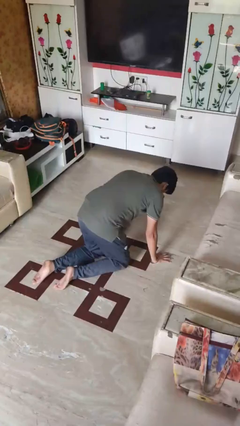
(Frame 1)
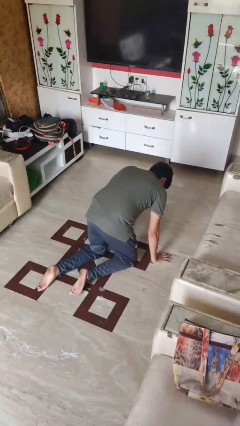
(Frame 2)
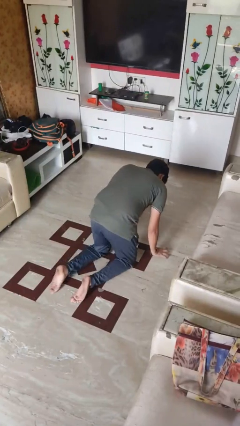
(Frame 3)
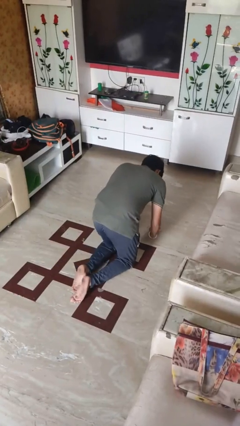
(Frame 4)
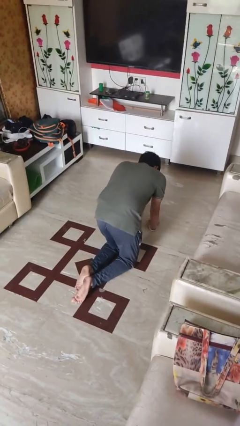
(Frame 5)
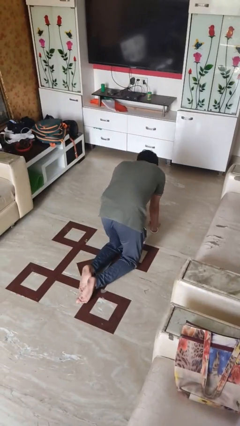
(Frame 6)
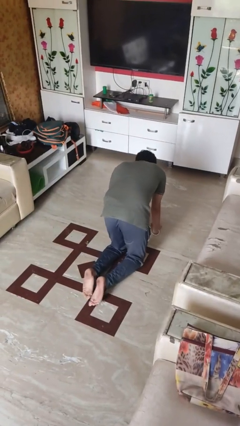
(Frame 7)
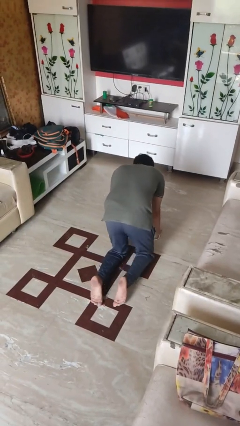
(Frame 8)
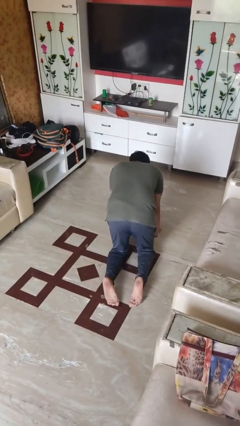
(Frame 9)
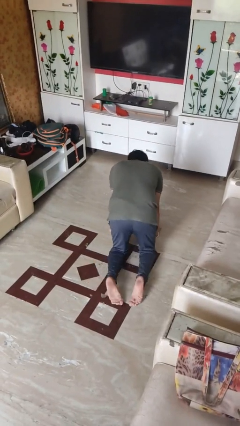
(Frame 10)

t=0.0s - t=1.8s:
person crawls

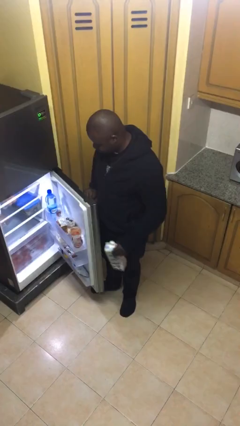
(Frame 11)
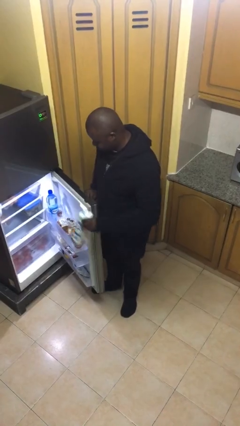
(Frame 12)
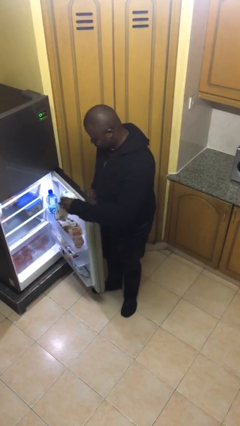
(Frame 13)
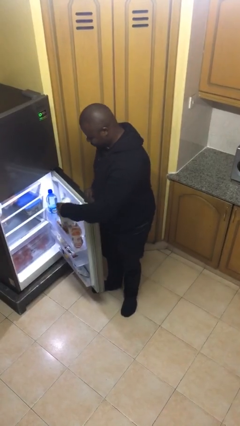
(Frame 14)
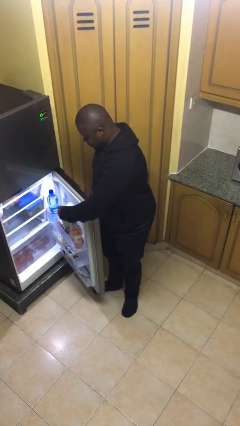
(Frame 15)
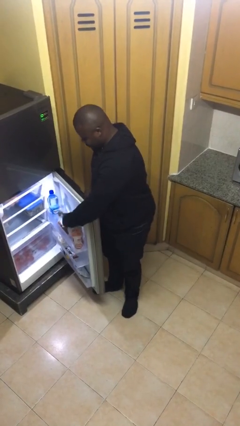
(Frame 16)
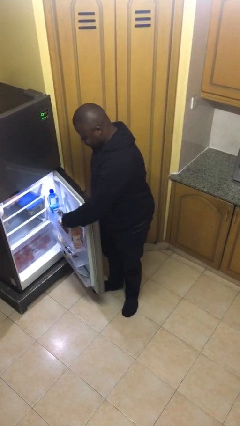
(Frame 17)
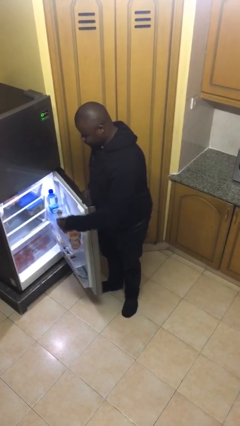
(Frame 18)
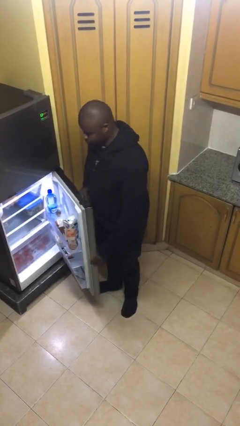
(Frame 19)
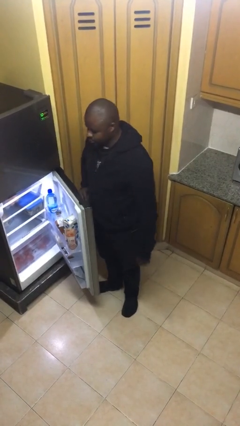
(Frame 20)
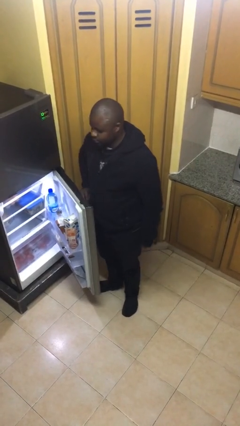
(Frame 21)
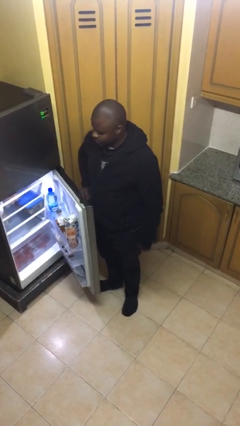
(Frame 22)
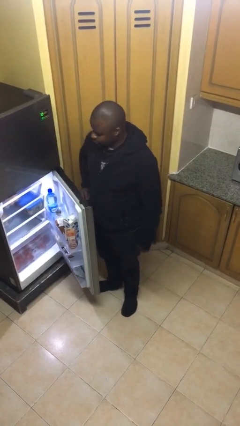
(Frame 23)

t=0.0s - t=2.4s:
person puts object into refrigerator

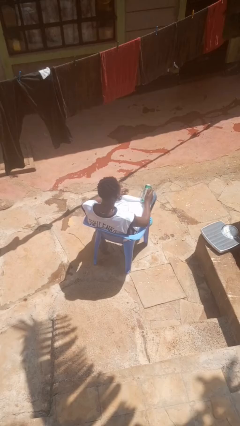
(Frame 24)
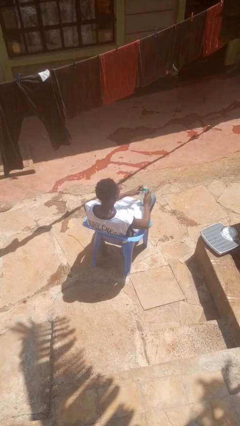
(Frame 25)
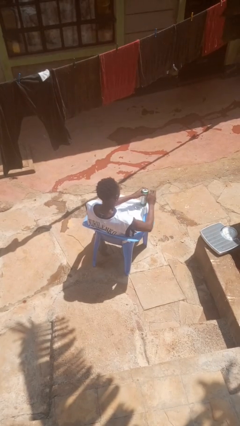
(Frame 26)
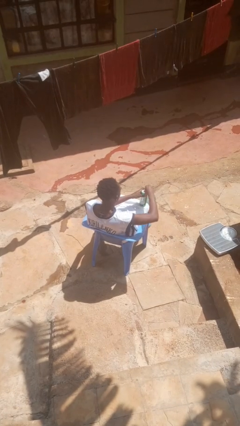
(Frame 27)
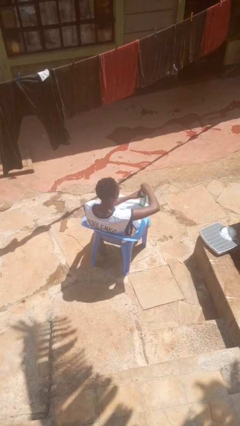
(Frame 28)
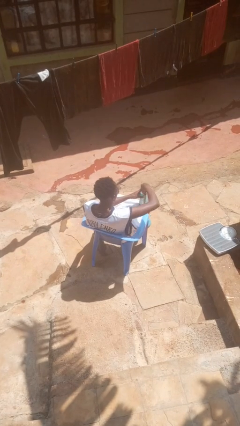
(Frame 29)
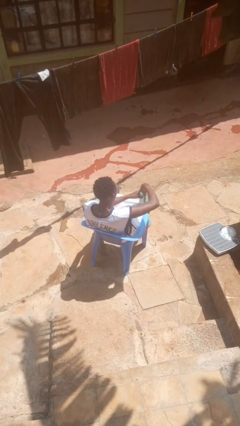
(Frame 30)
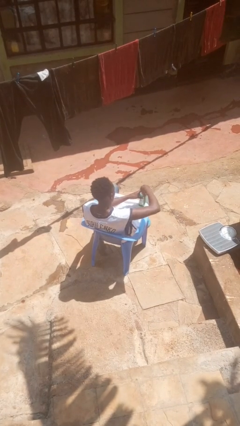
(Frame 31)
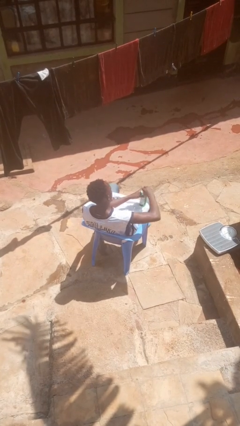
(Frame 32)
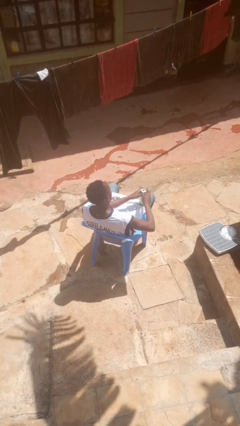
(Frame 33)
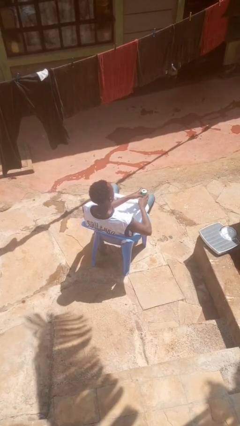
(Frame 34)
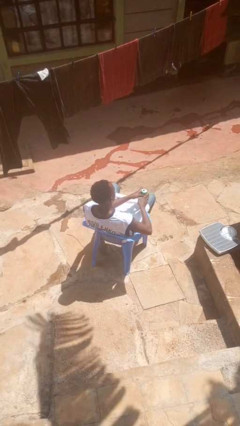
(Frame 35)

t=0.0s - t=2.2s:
person opens beverage can

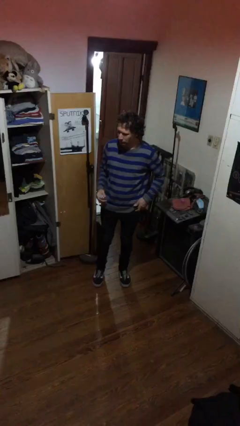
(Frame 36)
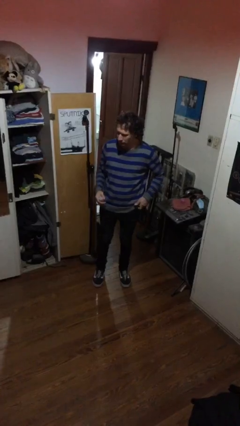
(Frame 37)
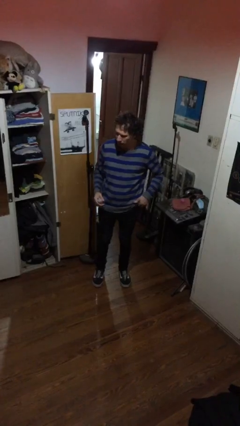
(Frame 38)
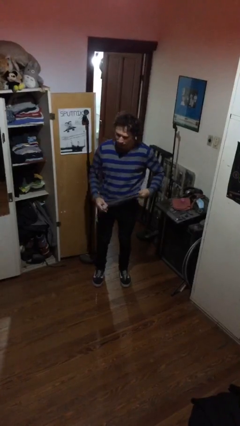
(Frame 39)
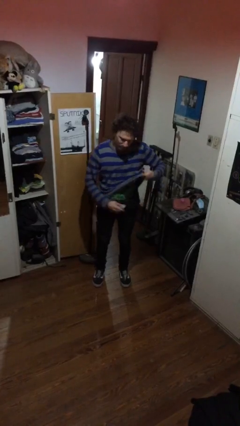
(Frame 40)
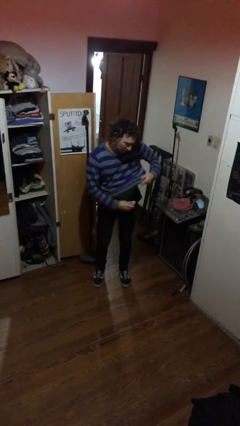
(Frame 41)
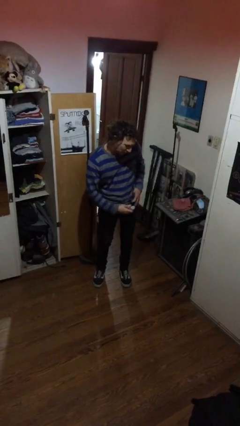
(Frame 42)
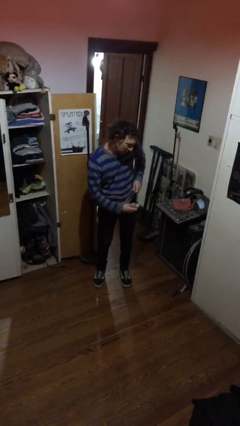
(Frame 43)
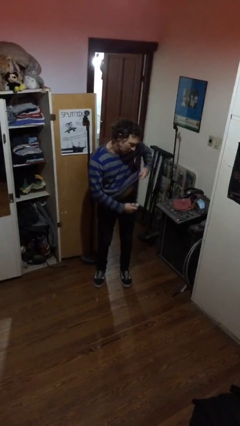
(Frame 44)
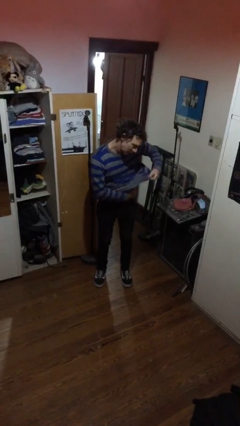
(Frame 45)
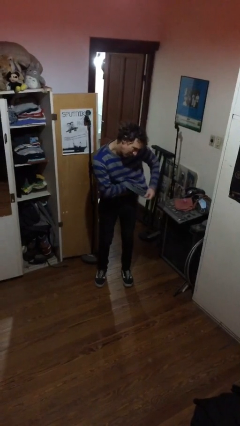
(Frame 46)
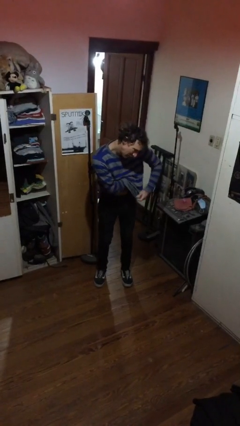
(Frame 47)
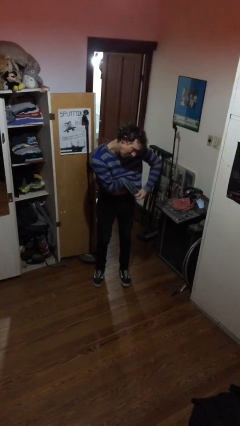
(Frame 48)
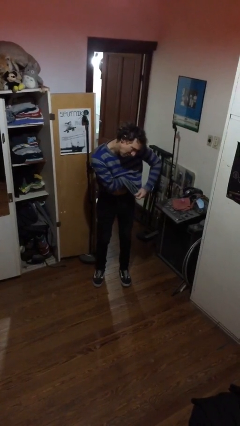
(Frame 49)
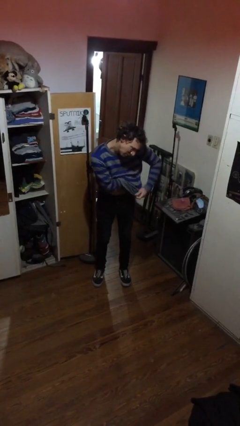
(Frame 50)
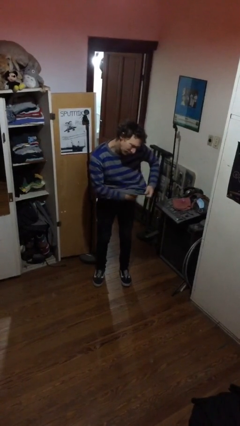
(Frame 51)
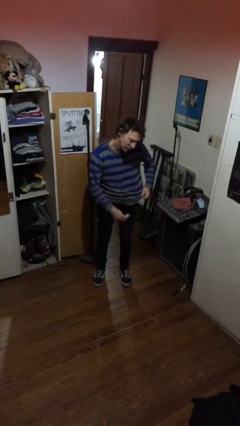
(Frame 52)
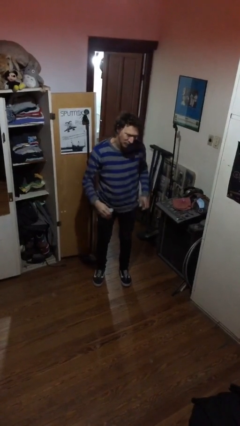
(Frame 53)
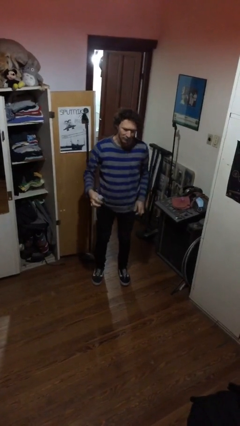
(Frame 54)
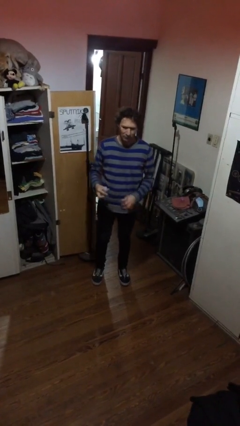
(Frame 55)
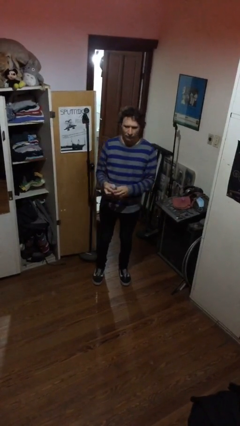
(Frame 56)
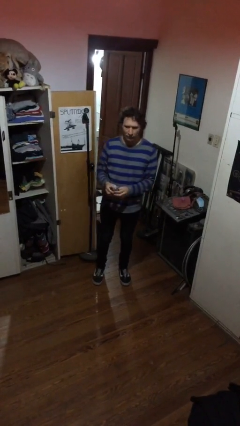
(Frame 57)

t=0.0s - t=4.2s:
person applies deodorant

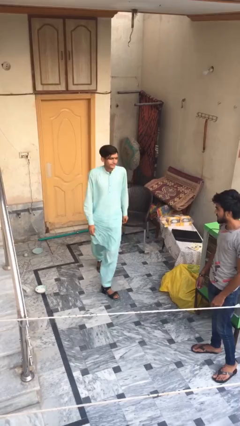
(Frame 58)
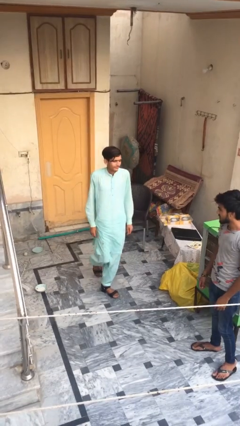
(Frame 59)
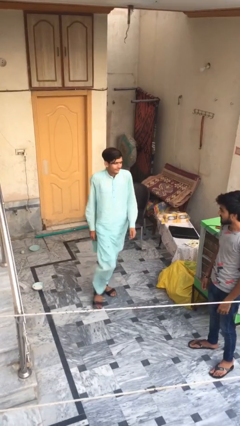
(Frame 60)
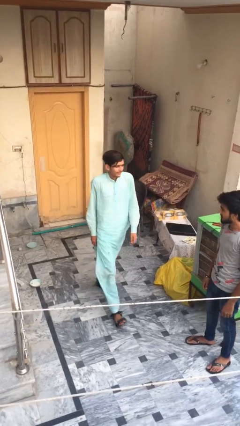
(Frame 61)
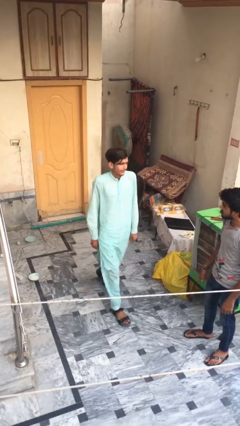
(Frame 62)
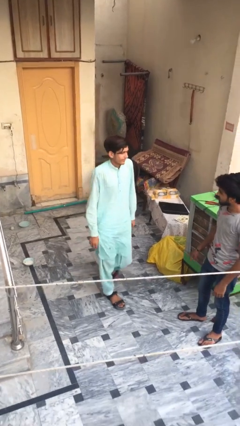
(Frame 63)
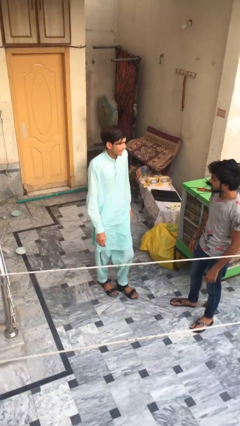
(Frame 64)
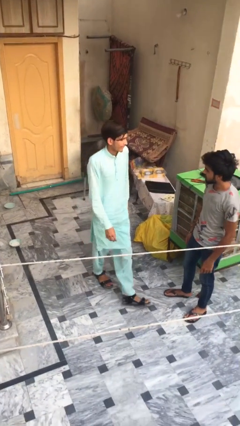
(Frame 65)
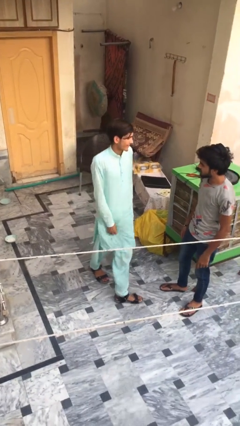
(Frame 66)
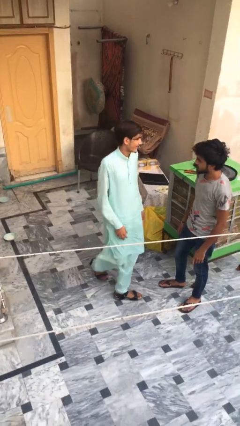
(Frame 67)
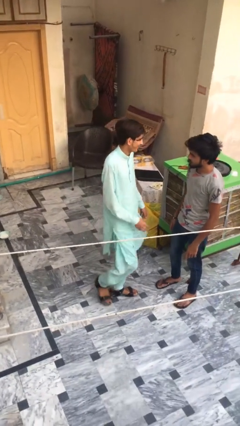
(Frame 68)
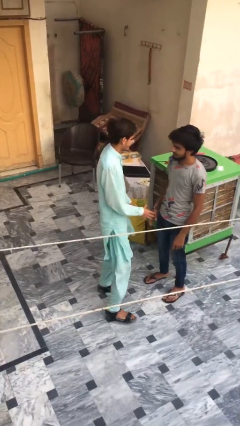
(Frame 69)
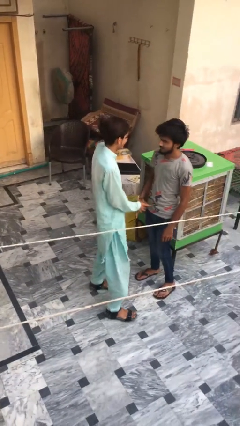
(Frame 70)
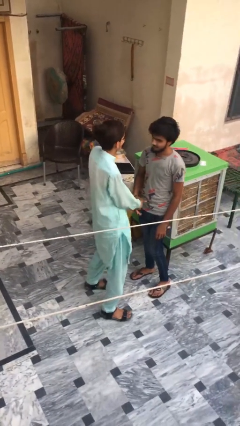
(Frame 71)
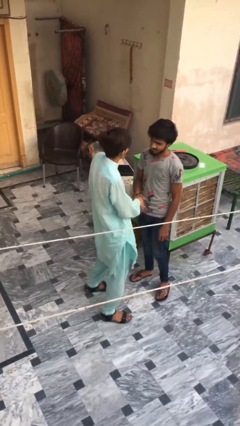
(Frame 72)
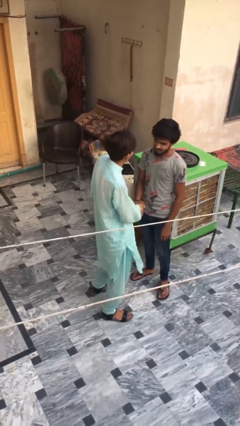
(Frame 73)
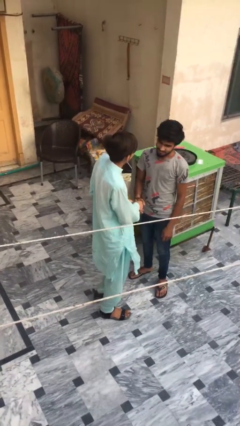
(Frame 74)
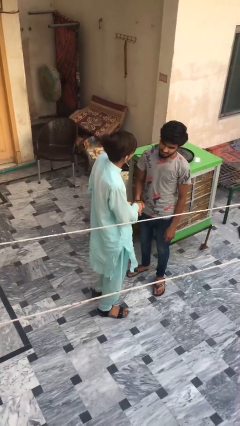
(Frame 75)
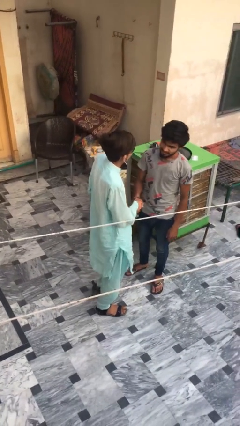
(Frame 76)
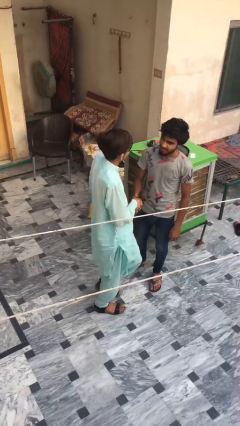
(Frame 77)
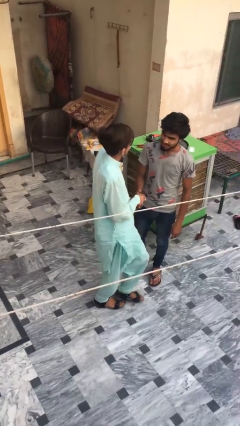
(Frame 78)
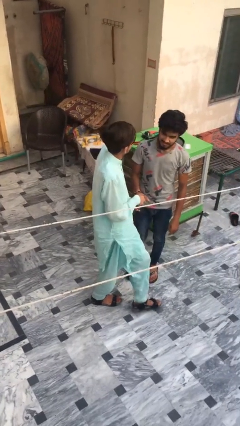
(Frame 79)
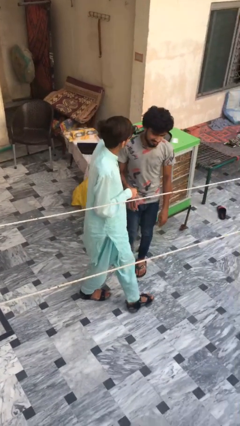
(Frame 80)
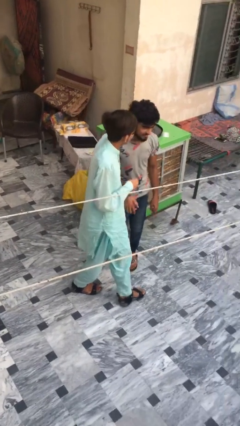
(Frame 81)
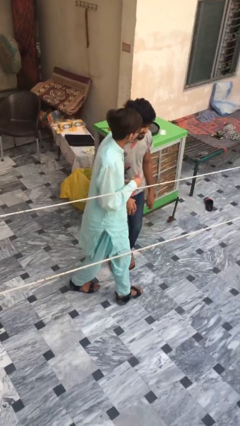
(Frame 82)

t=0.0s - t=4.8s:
person shakes hand

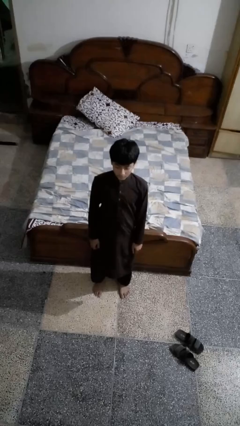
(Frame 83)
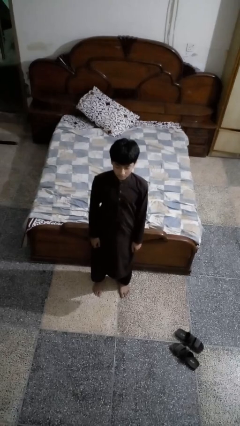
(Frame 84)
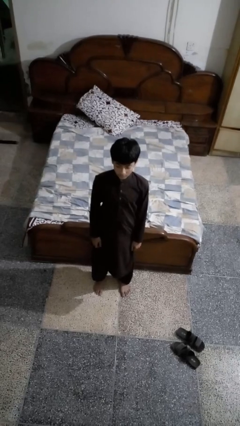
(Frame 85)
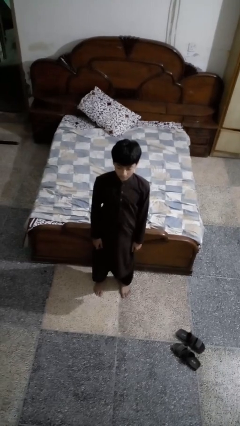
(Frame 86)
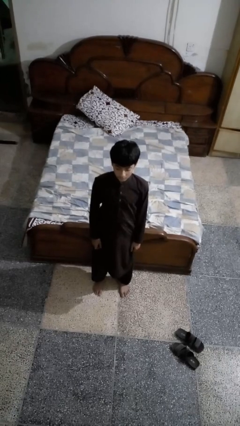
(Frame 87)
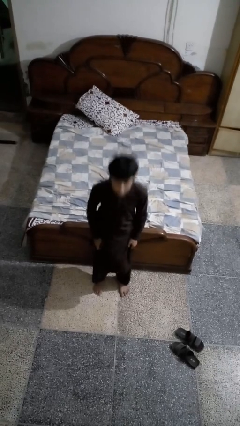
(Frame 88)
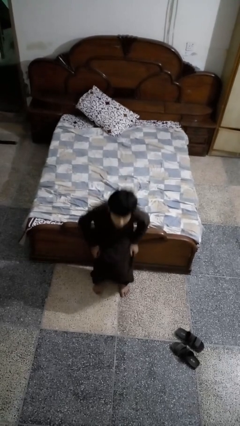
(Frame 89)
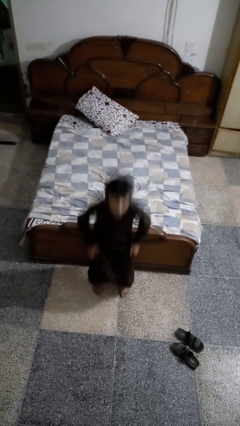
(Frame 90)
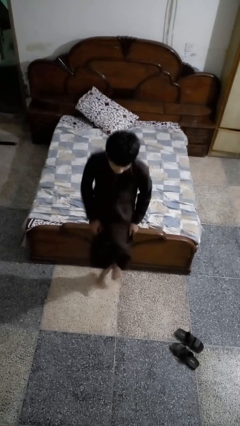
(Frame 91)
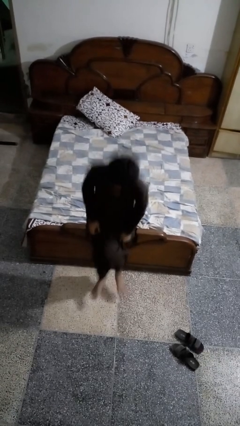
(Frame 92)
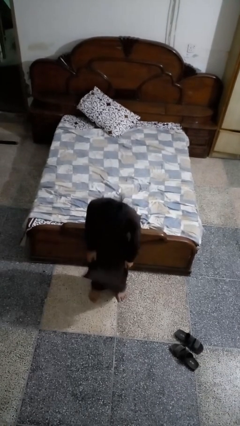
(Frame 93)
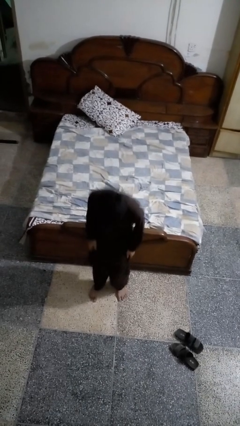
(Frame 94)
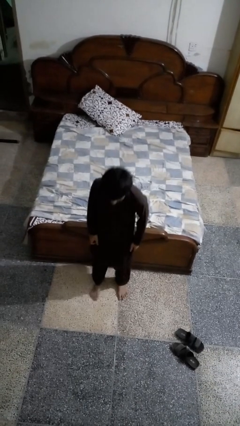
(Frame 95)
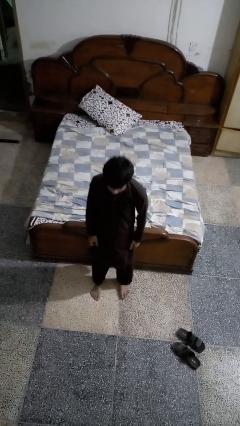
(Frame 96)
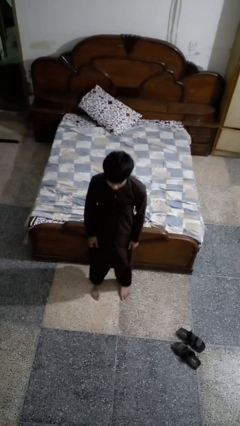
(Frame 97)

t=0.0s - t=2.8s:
person jumps
